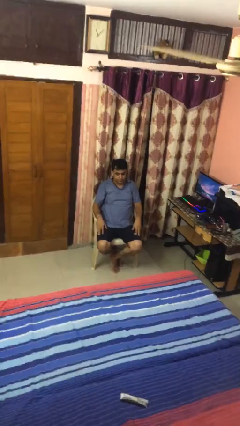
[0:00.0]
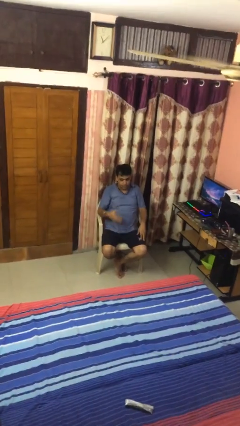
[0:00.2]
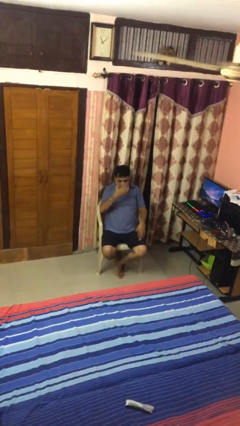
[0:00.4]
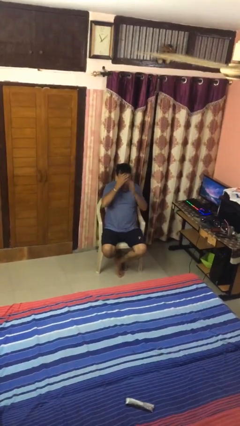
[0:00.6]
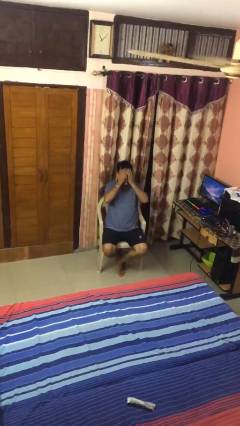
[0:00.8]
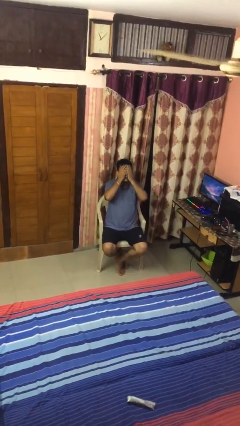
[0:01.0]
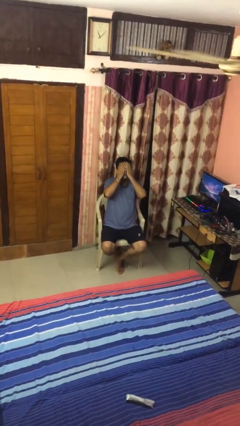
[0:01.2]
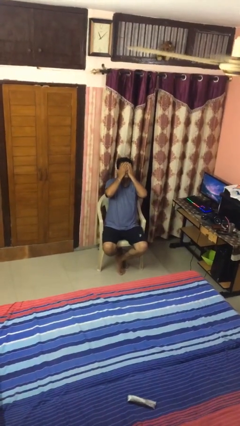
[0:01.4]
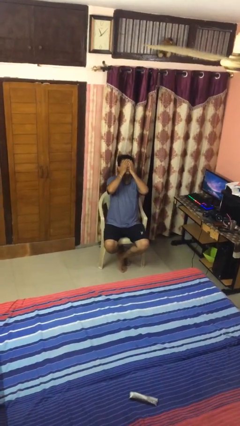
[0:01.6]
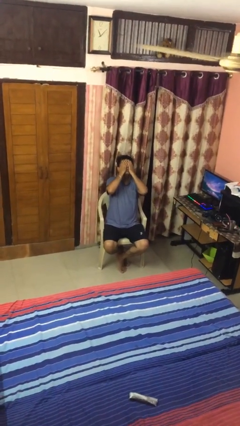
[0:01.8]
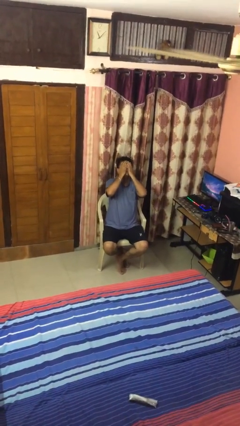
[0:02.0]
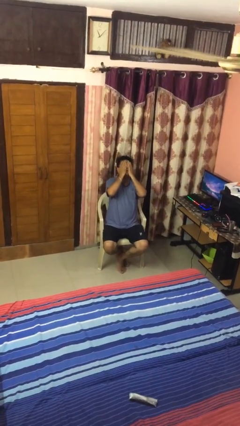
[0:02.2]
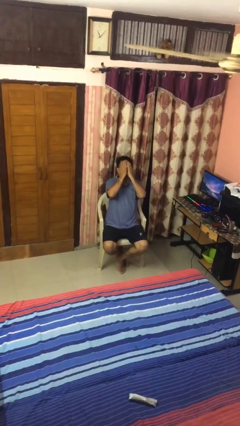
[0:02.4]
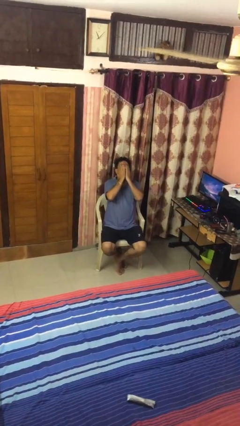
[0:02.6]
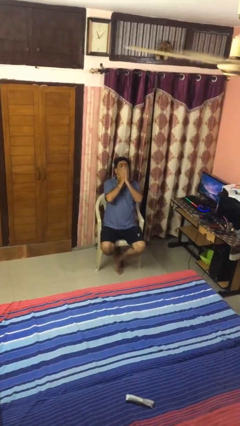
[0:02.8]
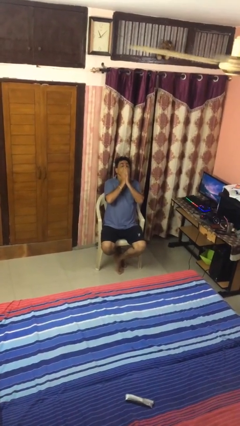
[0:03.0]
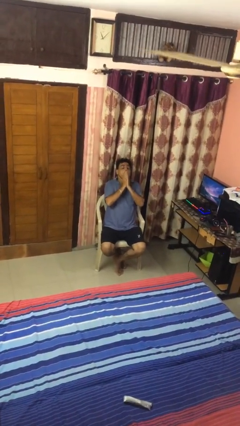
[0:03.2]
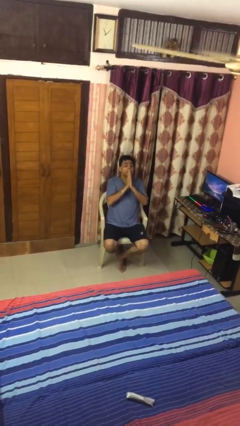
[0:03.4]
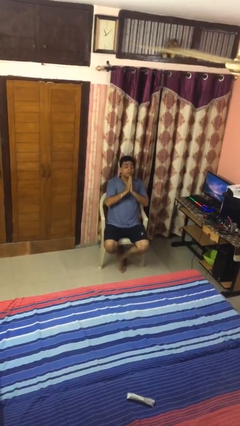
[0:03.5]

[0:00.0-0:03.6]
person covers face with hands

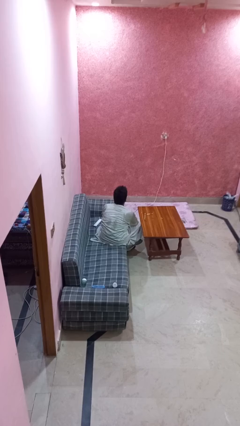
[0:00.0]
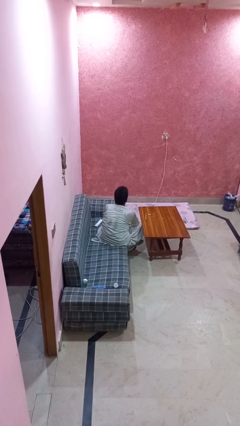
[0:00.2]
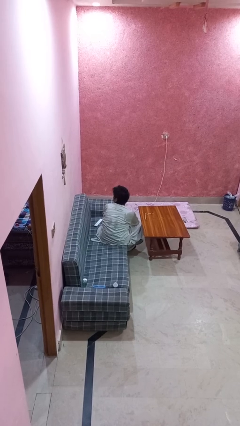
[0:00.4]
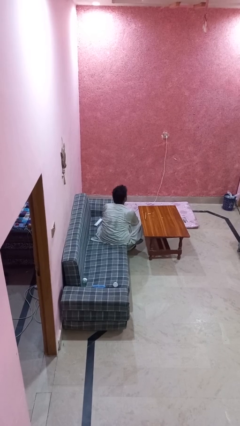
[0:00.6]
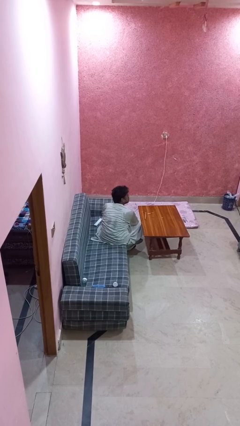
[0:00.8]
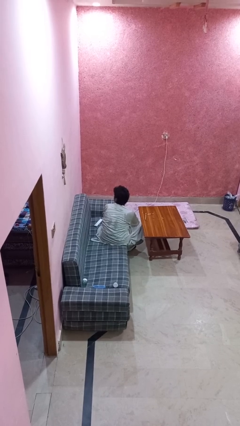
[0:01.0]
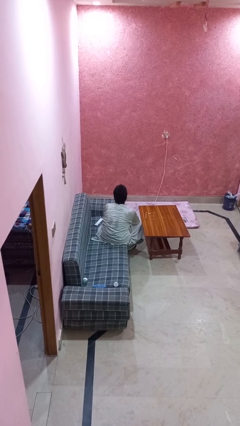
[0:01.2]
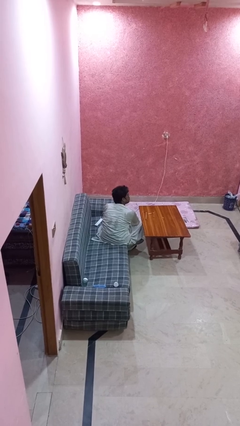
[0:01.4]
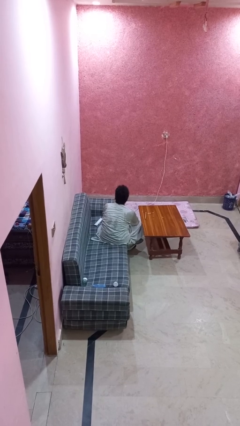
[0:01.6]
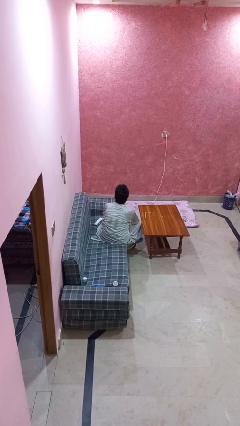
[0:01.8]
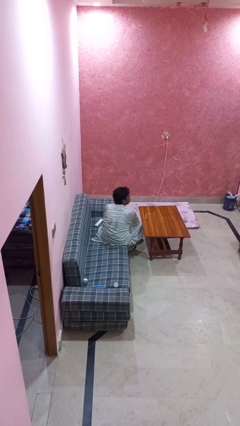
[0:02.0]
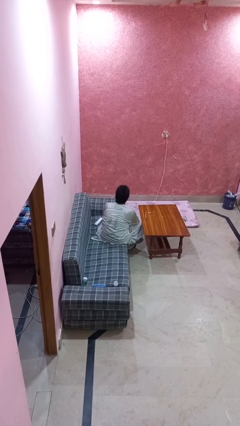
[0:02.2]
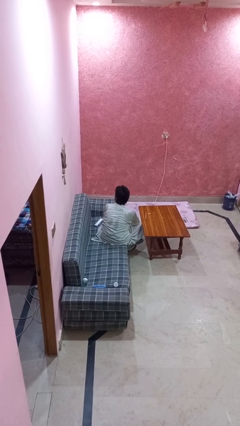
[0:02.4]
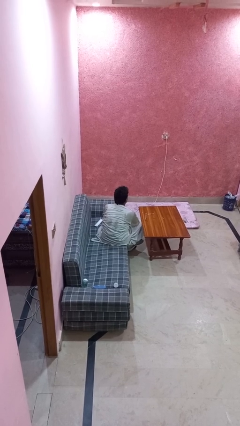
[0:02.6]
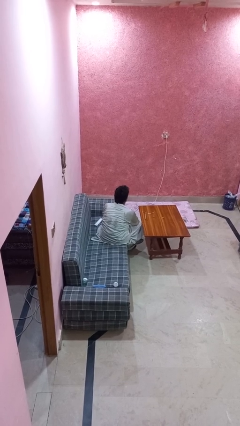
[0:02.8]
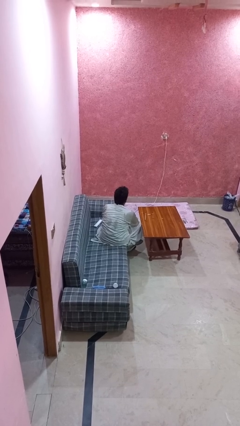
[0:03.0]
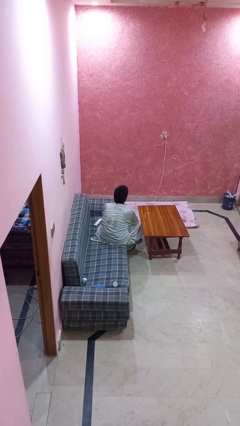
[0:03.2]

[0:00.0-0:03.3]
person shakes head

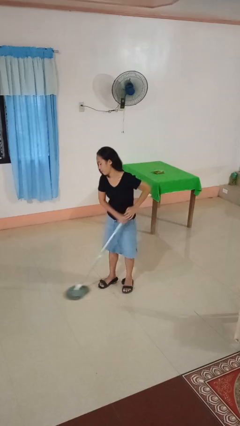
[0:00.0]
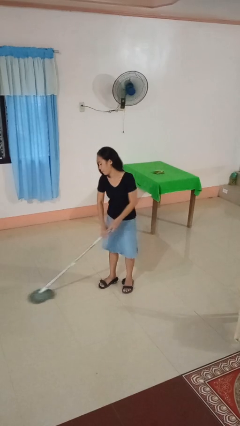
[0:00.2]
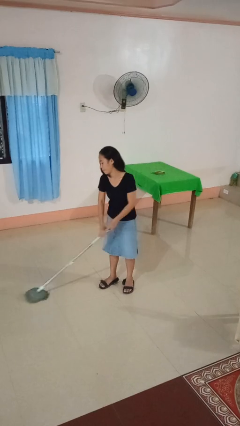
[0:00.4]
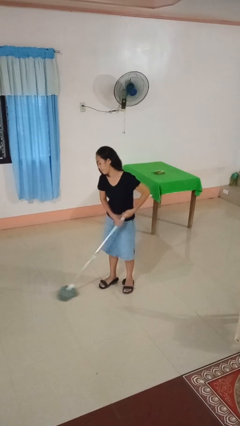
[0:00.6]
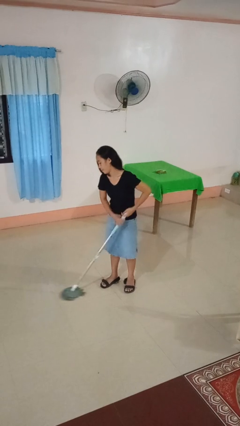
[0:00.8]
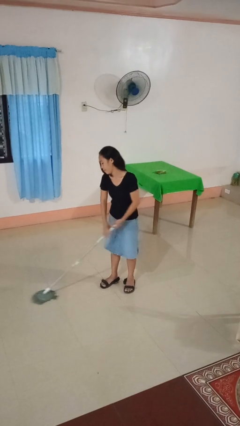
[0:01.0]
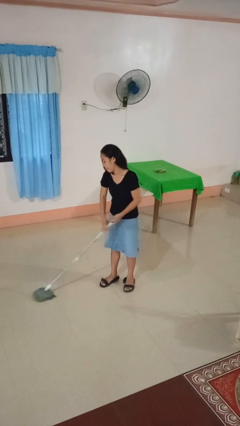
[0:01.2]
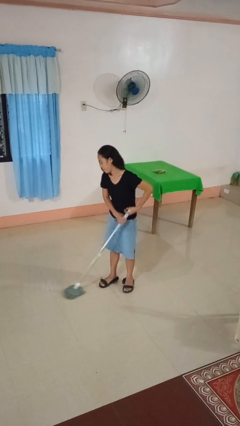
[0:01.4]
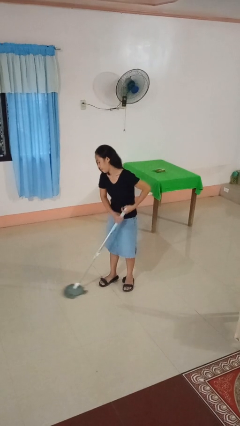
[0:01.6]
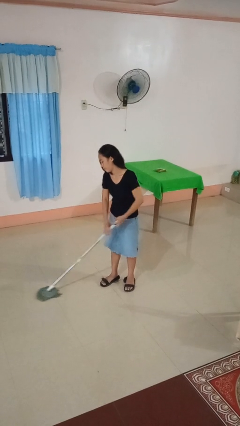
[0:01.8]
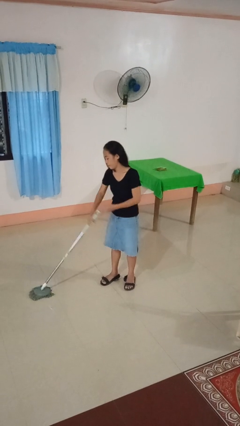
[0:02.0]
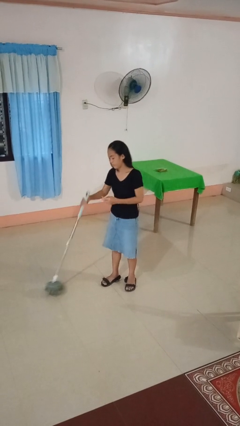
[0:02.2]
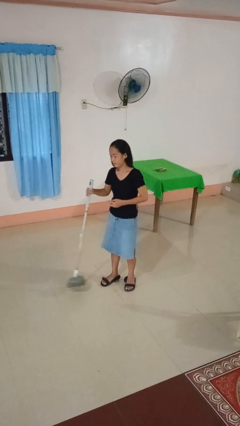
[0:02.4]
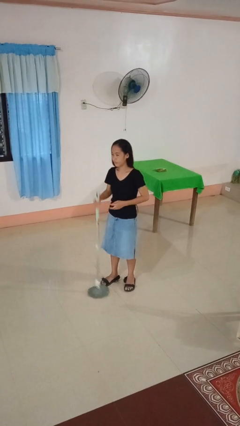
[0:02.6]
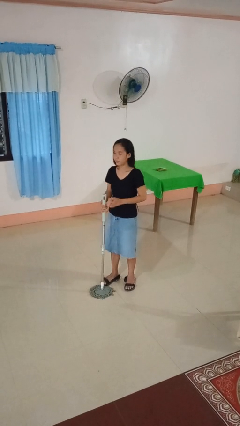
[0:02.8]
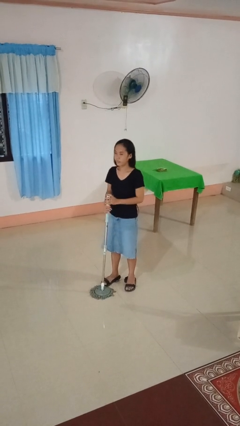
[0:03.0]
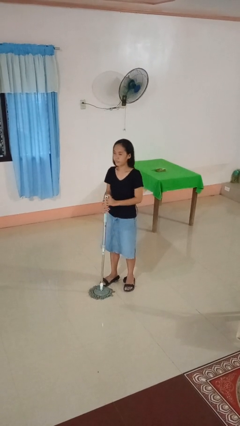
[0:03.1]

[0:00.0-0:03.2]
person mops

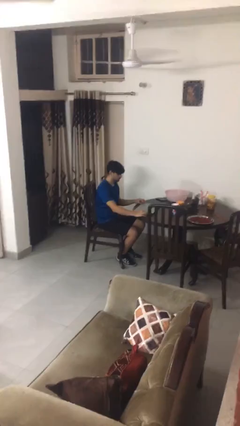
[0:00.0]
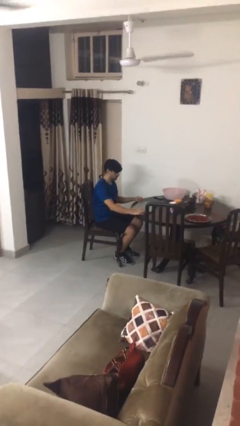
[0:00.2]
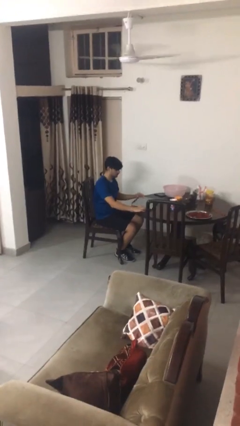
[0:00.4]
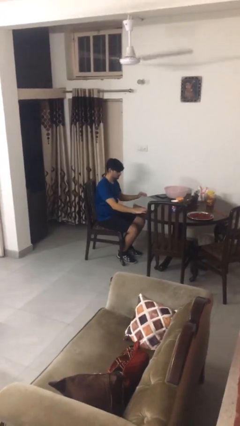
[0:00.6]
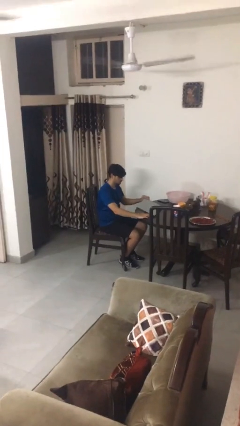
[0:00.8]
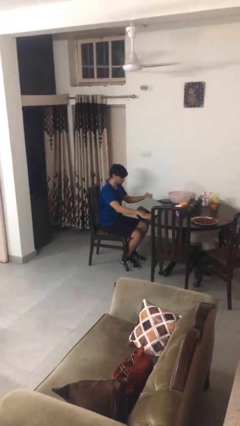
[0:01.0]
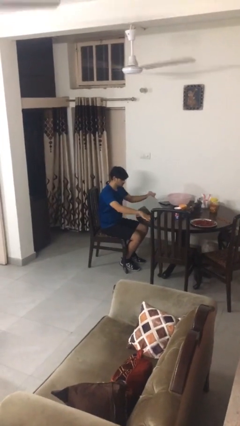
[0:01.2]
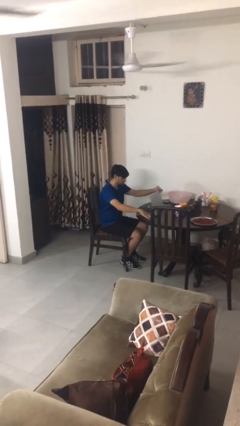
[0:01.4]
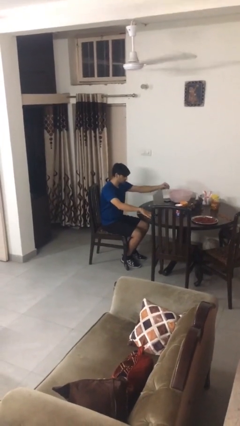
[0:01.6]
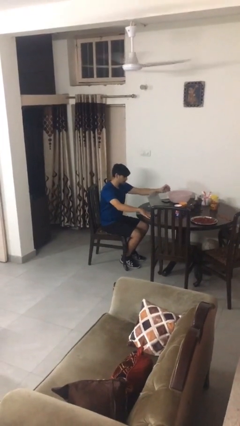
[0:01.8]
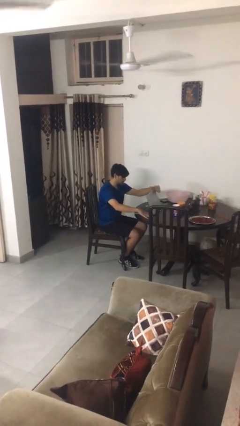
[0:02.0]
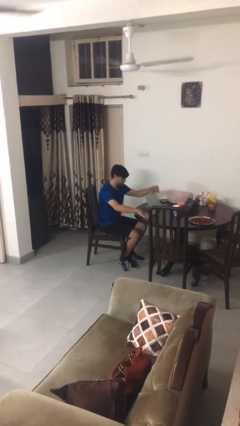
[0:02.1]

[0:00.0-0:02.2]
person opens laptop

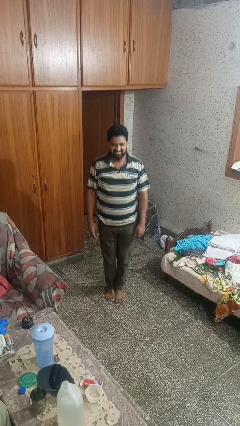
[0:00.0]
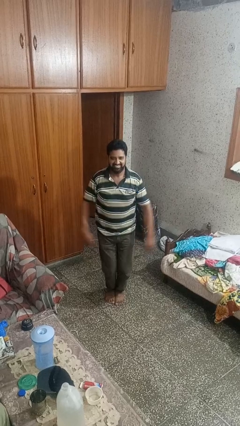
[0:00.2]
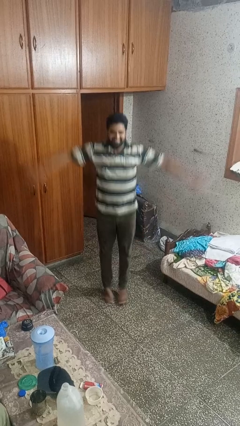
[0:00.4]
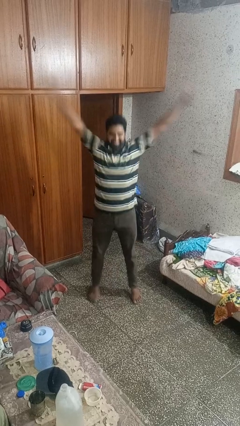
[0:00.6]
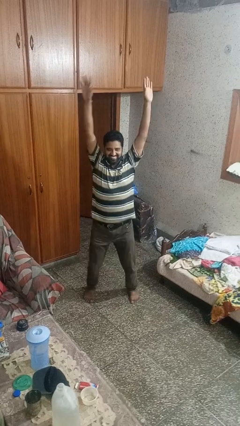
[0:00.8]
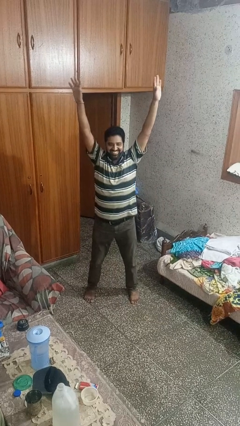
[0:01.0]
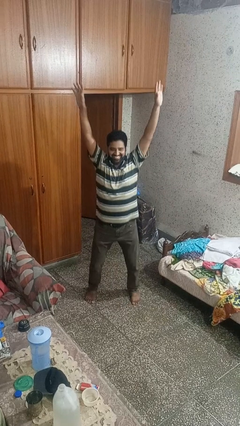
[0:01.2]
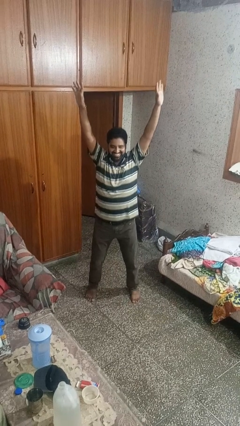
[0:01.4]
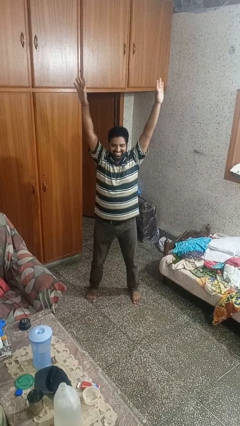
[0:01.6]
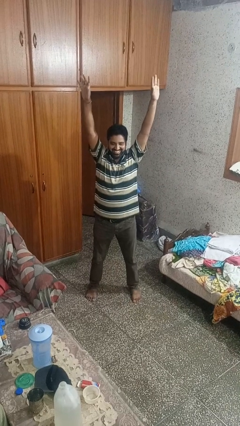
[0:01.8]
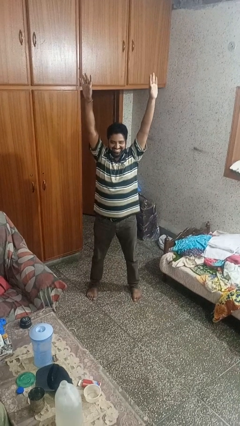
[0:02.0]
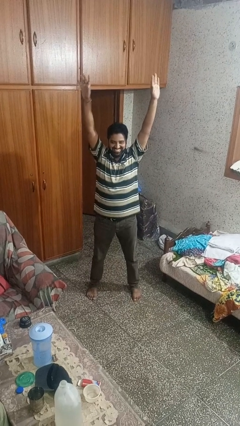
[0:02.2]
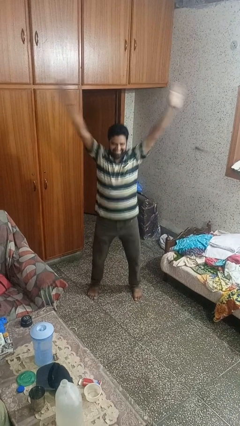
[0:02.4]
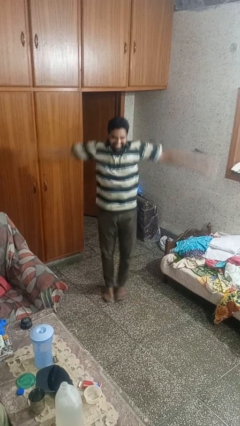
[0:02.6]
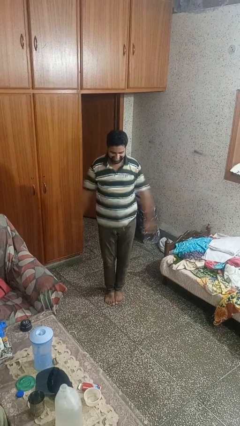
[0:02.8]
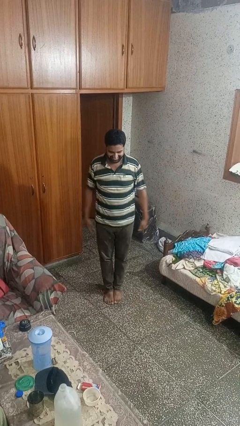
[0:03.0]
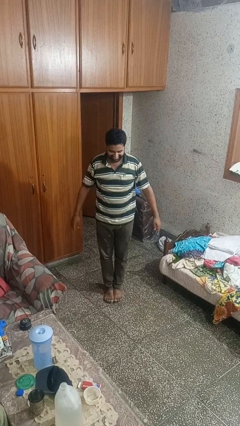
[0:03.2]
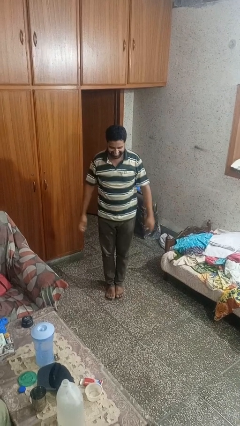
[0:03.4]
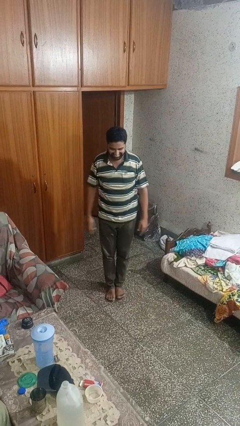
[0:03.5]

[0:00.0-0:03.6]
person exercises with jumping jacks

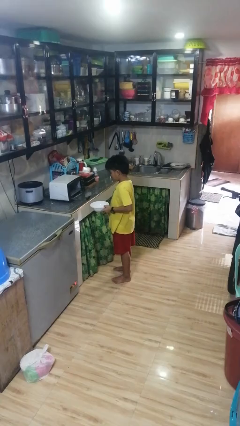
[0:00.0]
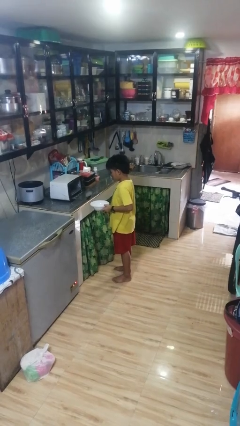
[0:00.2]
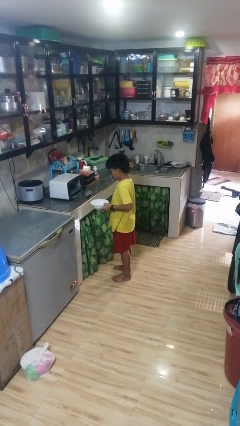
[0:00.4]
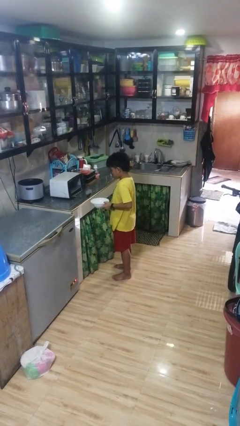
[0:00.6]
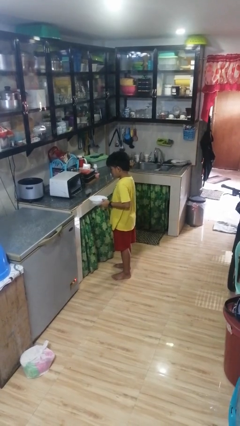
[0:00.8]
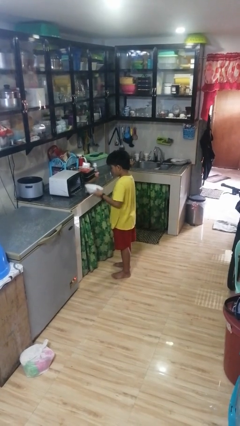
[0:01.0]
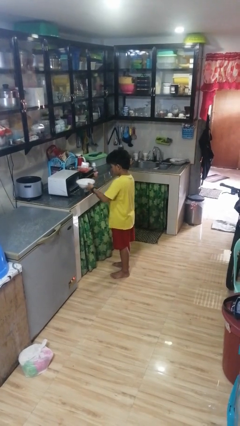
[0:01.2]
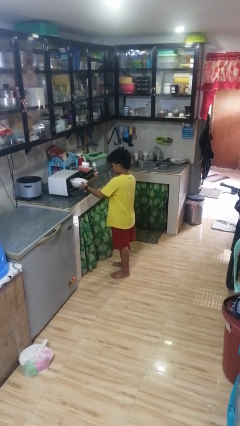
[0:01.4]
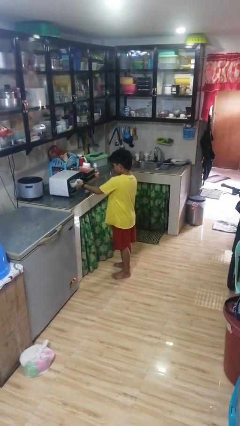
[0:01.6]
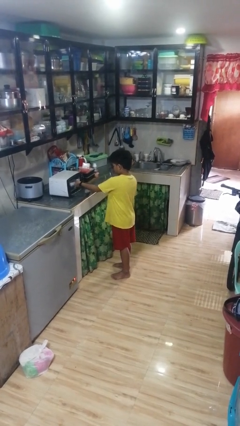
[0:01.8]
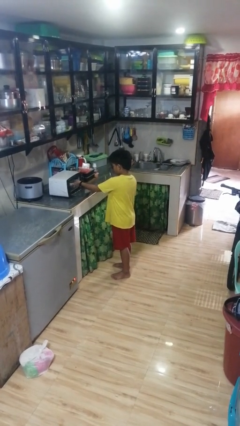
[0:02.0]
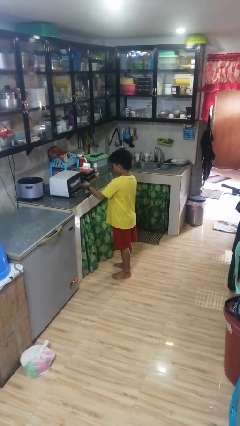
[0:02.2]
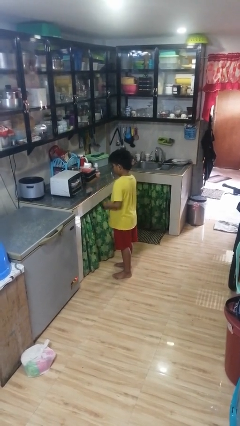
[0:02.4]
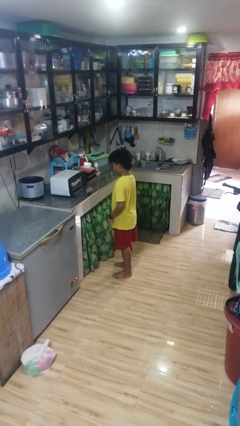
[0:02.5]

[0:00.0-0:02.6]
person puts object into microwave
